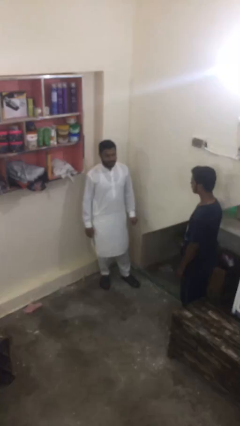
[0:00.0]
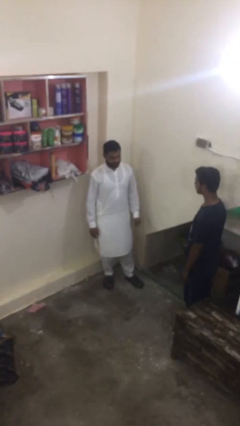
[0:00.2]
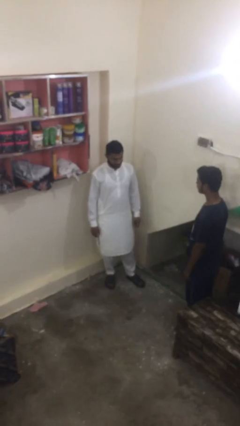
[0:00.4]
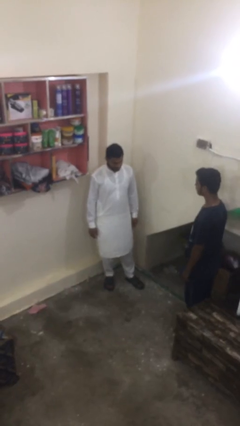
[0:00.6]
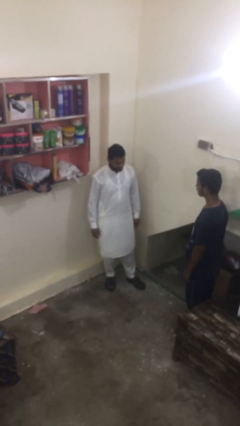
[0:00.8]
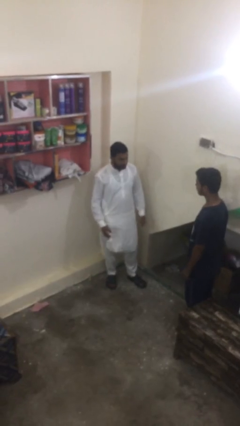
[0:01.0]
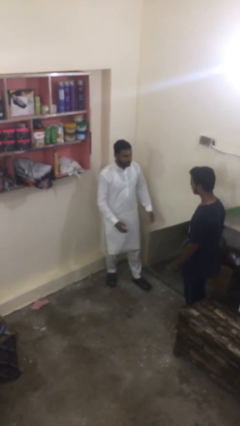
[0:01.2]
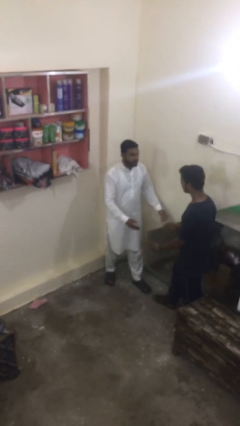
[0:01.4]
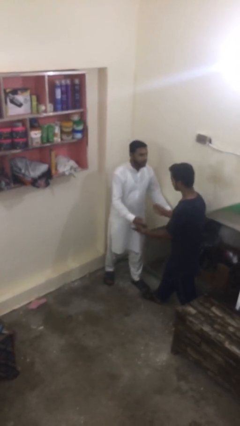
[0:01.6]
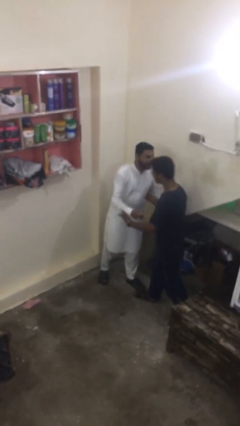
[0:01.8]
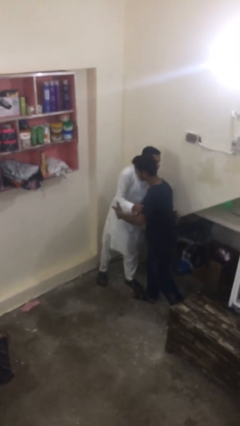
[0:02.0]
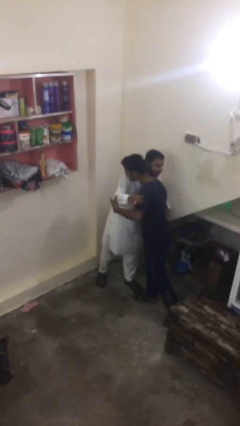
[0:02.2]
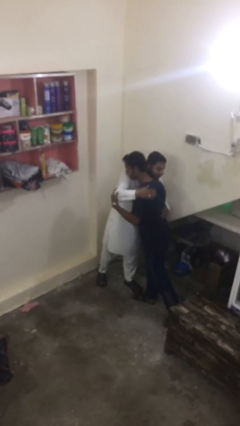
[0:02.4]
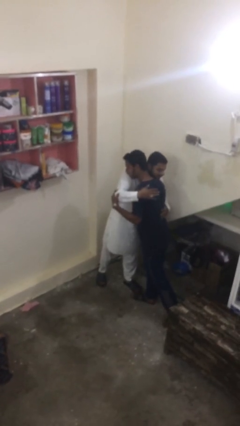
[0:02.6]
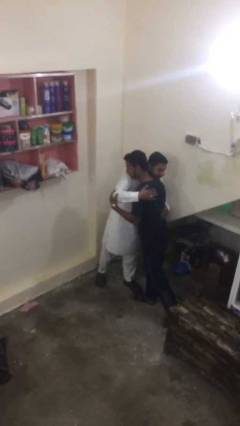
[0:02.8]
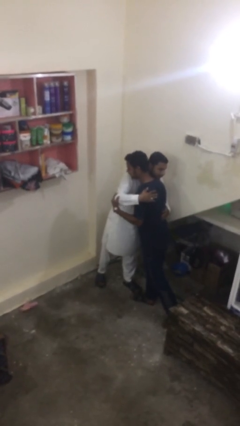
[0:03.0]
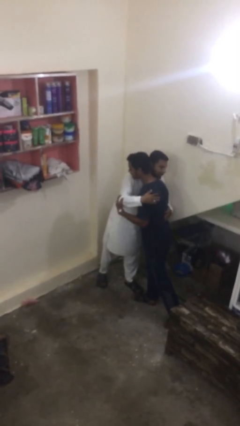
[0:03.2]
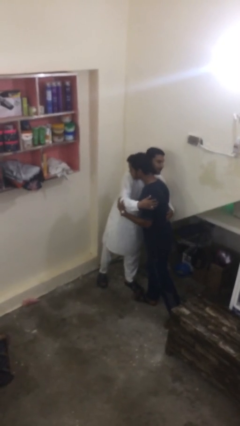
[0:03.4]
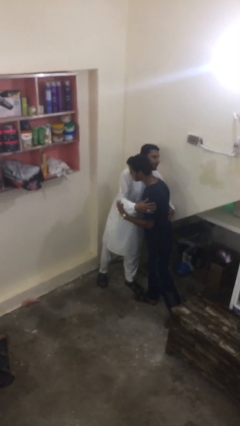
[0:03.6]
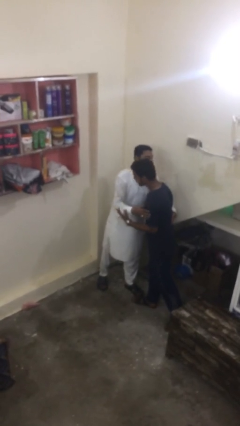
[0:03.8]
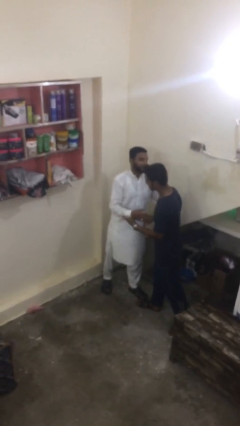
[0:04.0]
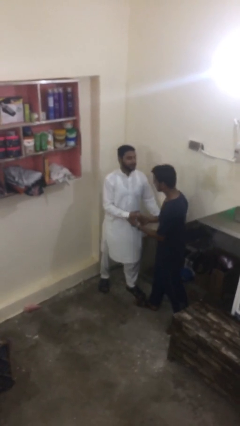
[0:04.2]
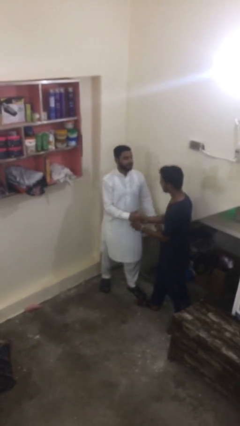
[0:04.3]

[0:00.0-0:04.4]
person embraces person

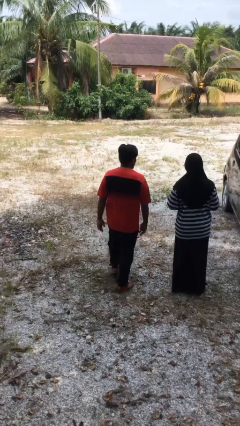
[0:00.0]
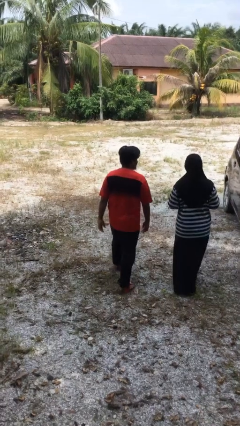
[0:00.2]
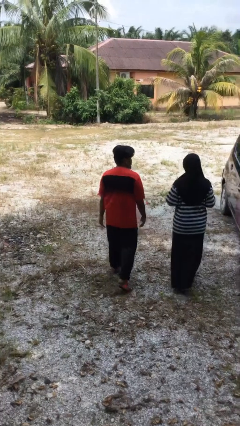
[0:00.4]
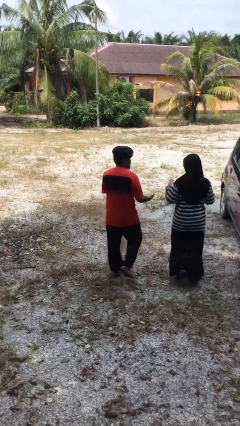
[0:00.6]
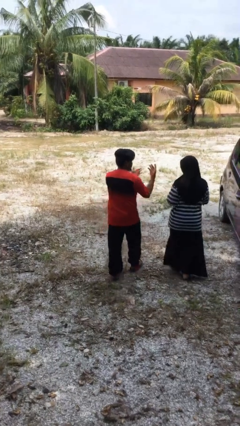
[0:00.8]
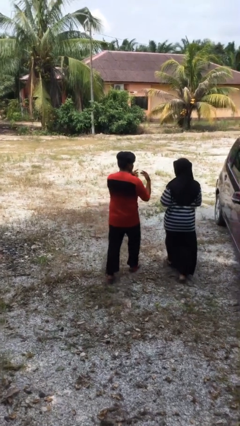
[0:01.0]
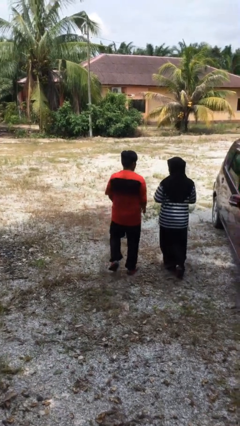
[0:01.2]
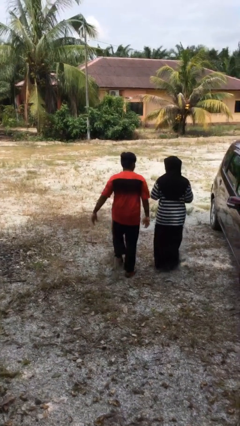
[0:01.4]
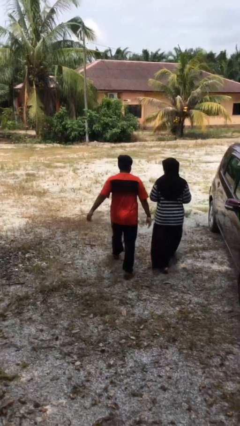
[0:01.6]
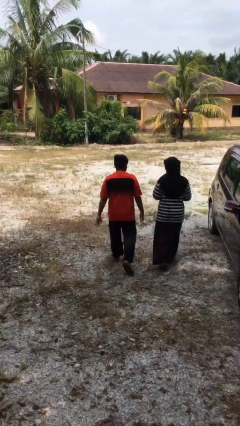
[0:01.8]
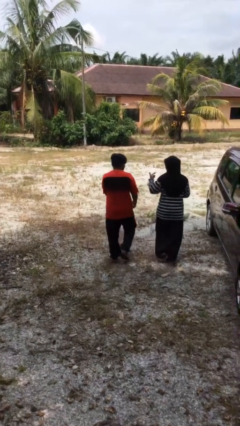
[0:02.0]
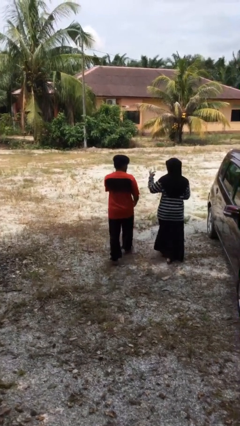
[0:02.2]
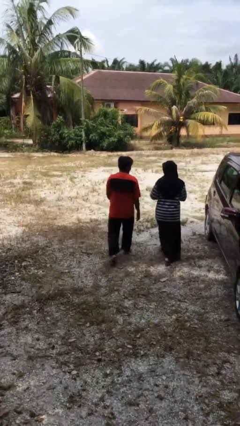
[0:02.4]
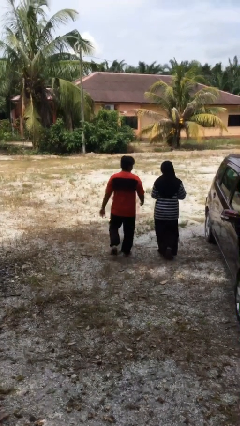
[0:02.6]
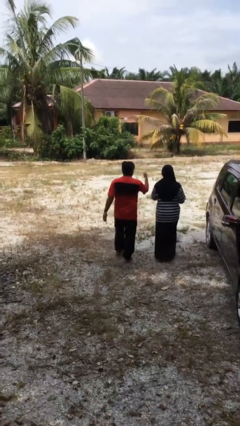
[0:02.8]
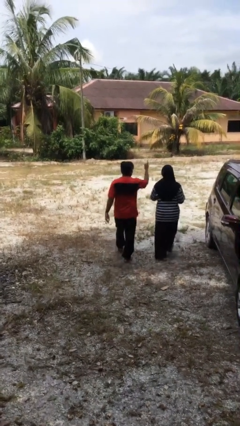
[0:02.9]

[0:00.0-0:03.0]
person talks to person

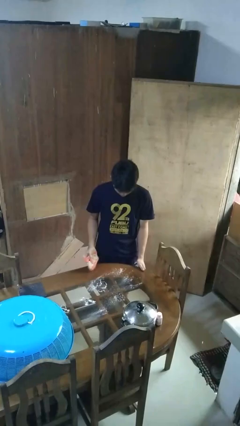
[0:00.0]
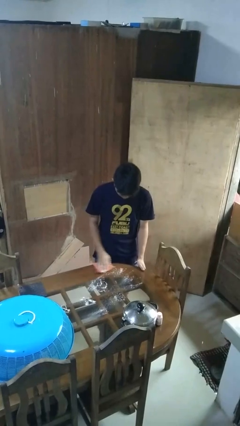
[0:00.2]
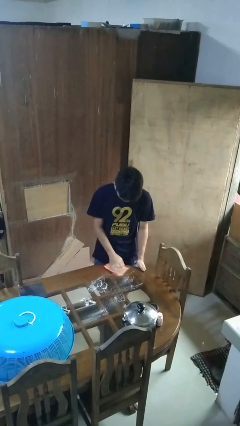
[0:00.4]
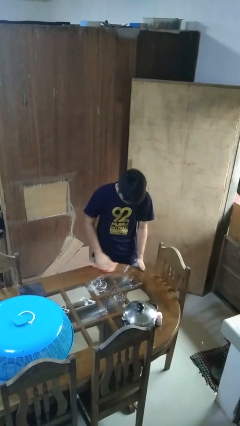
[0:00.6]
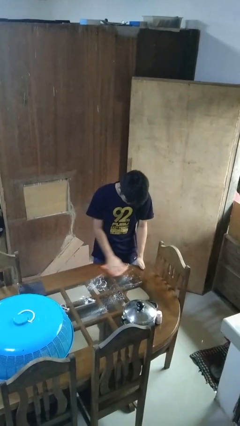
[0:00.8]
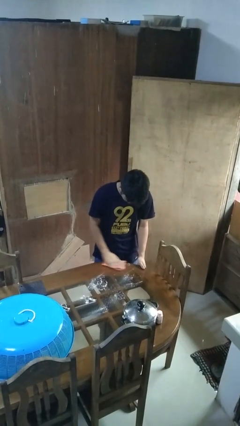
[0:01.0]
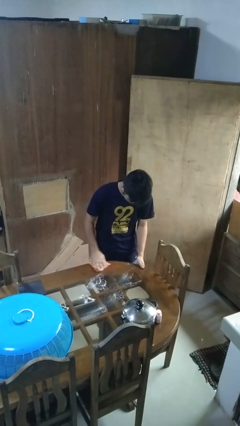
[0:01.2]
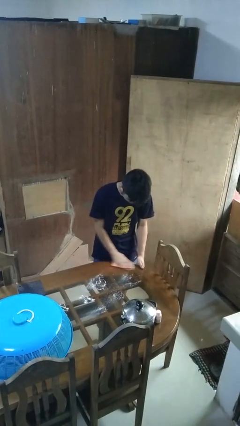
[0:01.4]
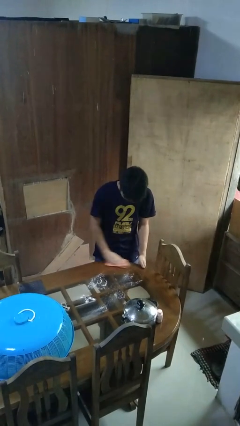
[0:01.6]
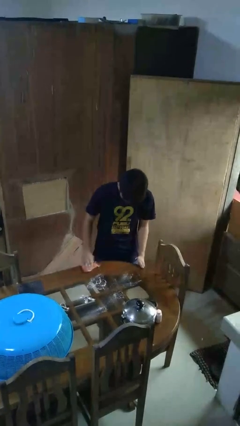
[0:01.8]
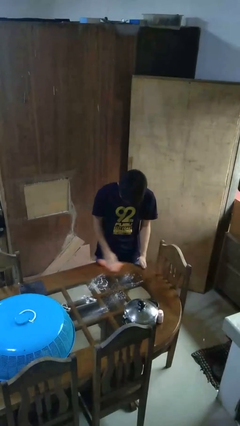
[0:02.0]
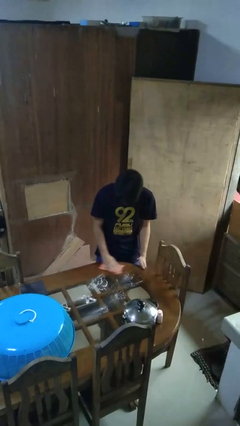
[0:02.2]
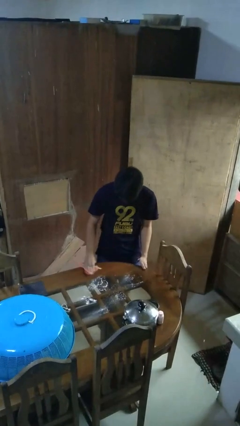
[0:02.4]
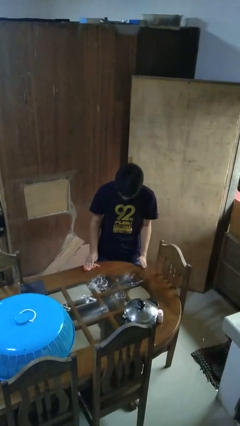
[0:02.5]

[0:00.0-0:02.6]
person cleans table with rag

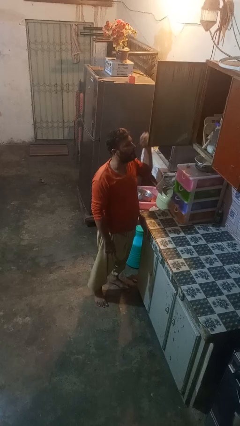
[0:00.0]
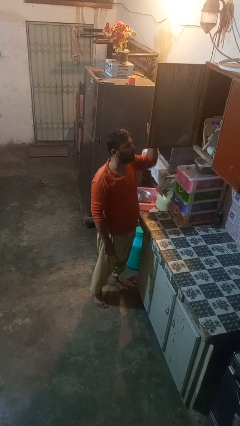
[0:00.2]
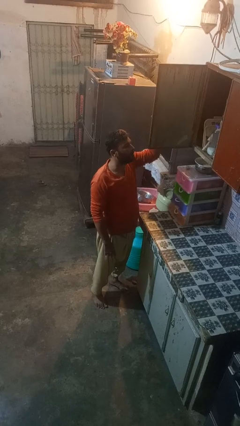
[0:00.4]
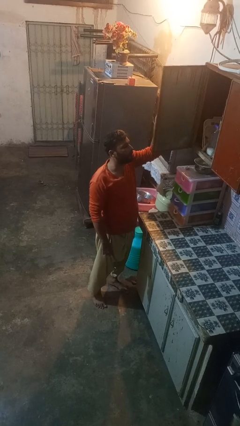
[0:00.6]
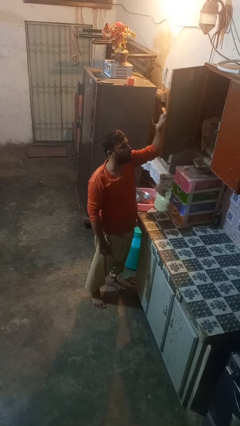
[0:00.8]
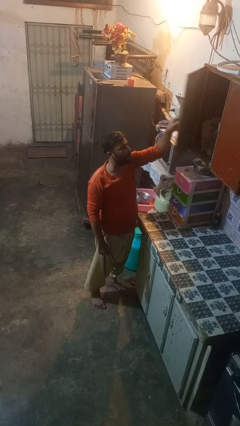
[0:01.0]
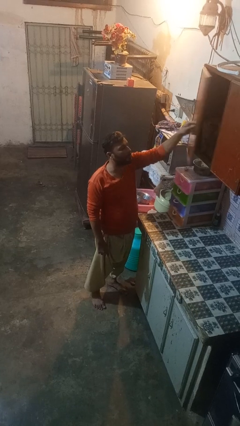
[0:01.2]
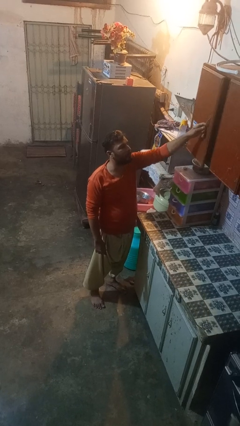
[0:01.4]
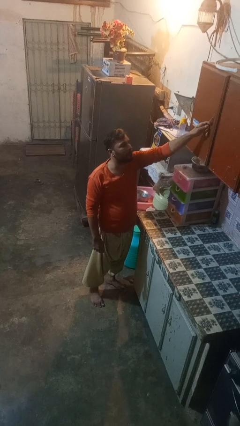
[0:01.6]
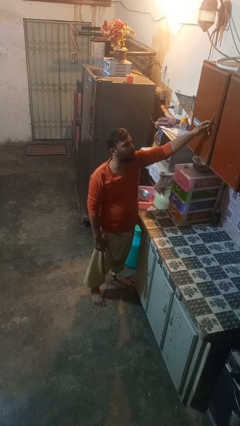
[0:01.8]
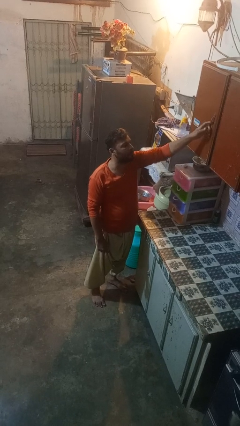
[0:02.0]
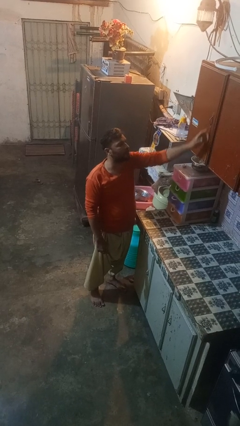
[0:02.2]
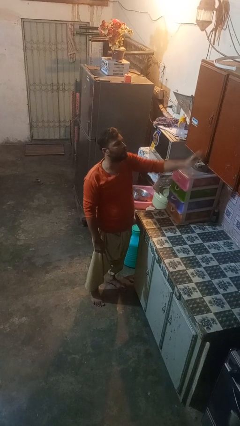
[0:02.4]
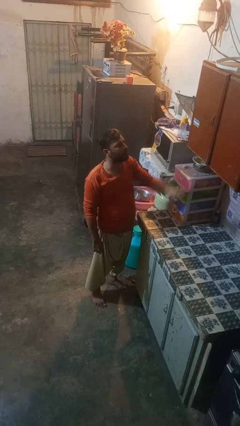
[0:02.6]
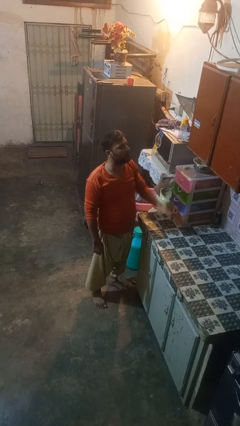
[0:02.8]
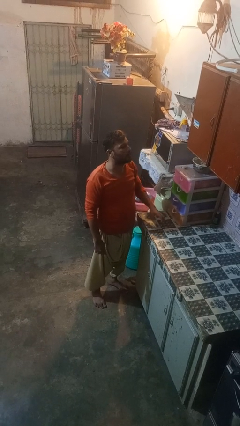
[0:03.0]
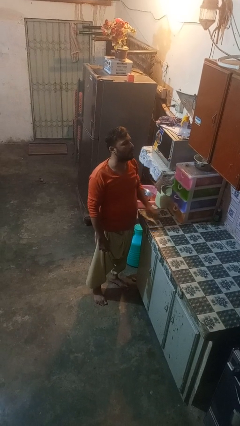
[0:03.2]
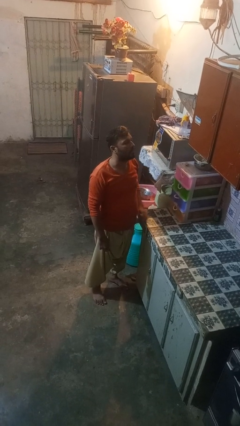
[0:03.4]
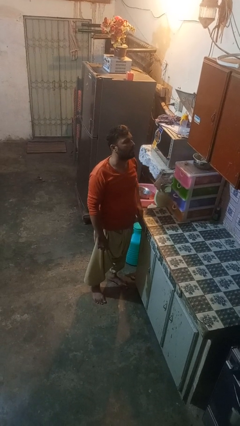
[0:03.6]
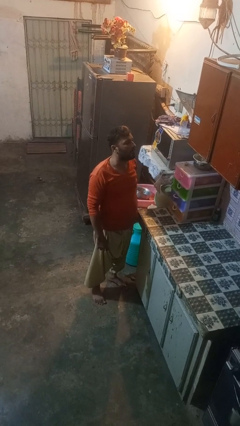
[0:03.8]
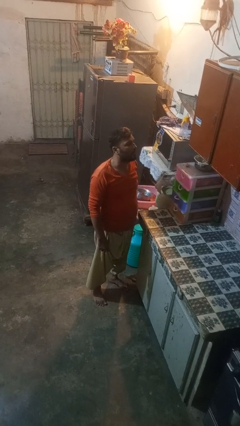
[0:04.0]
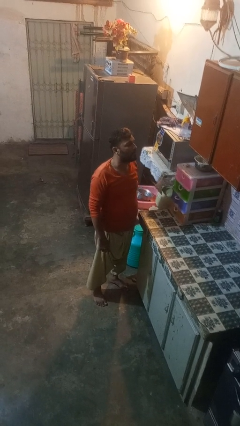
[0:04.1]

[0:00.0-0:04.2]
person closes cabinet

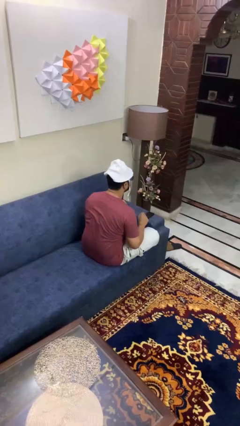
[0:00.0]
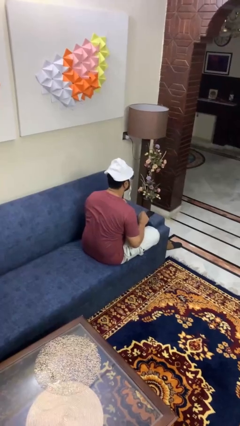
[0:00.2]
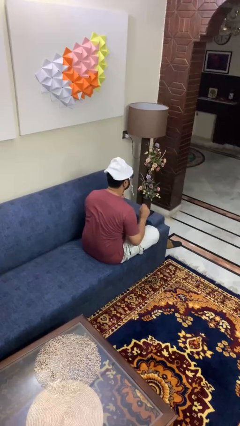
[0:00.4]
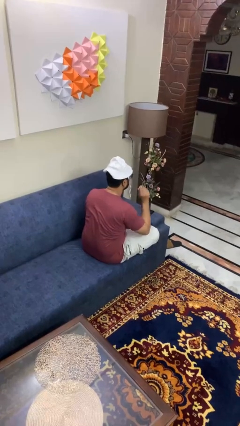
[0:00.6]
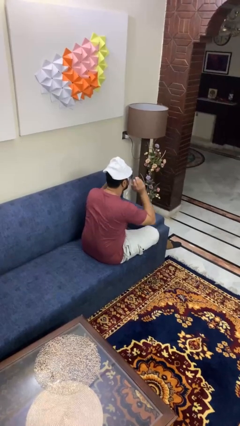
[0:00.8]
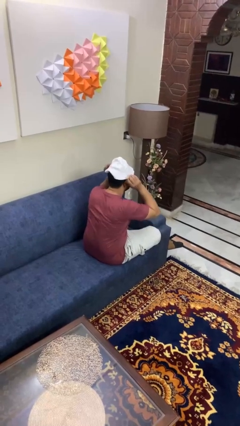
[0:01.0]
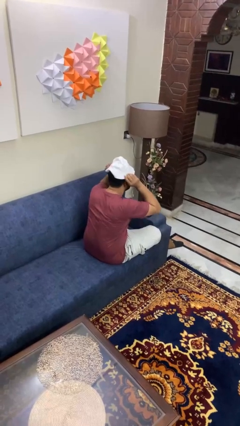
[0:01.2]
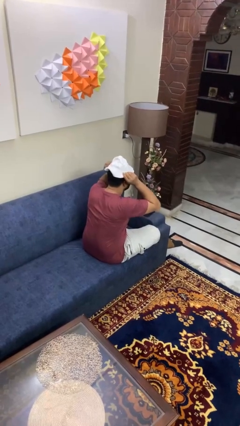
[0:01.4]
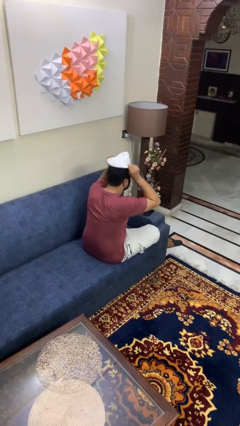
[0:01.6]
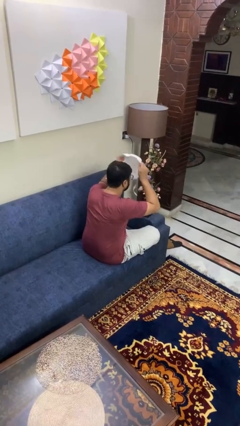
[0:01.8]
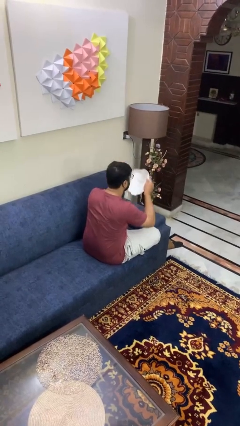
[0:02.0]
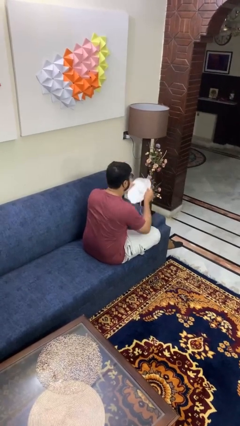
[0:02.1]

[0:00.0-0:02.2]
person takes off hat

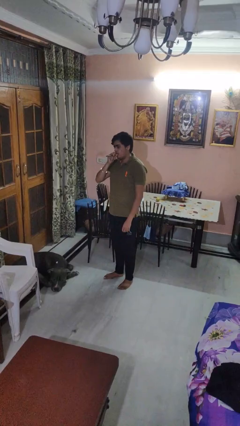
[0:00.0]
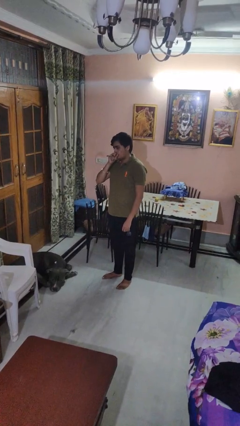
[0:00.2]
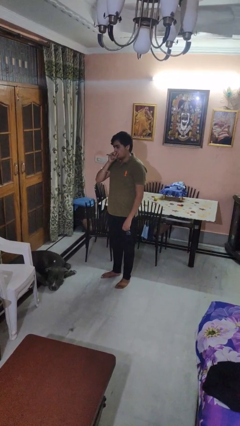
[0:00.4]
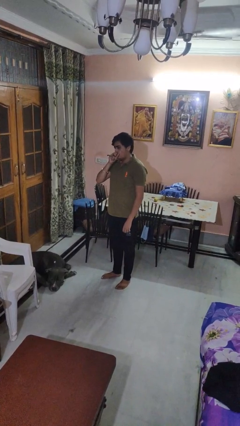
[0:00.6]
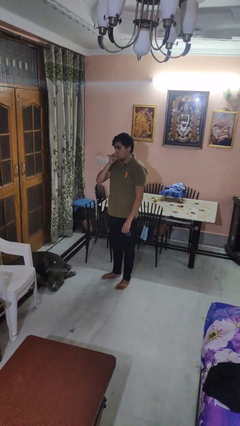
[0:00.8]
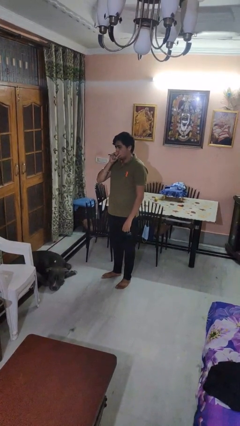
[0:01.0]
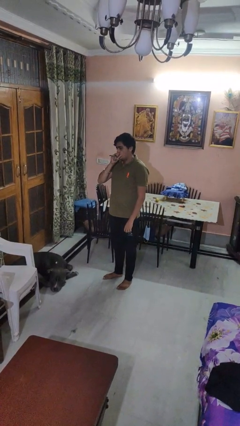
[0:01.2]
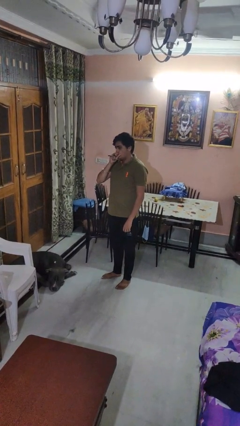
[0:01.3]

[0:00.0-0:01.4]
person vapes
